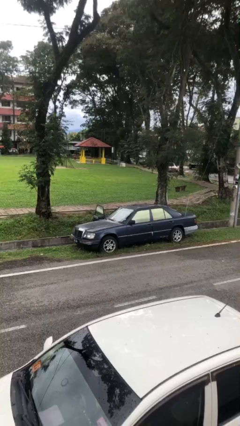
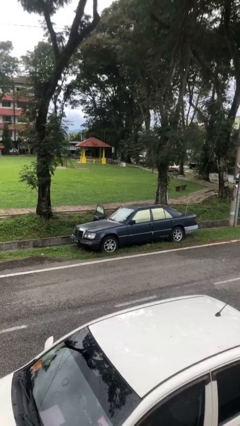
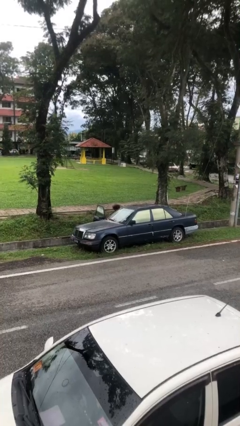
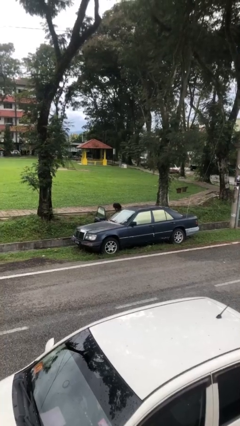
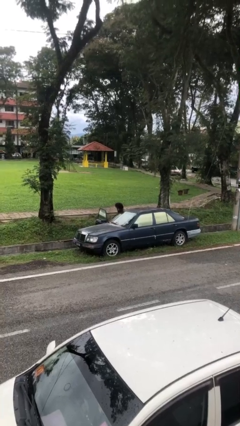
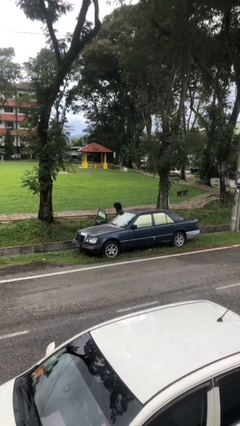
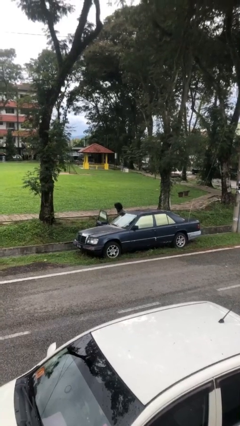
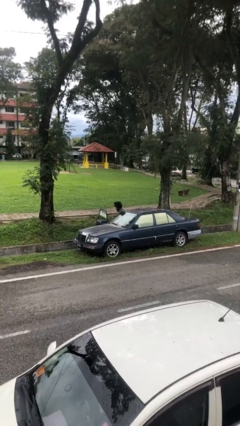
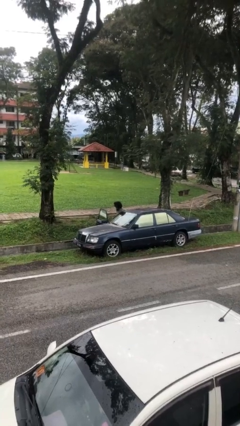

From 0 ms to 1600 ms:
person exits car

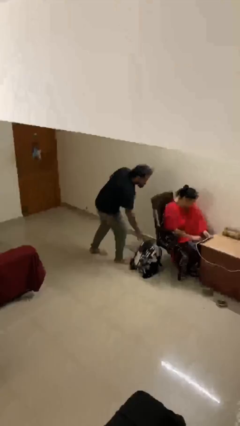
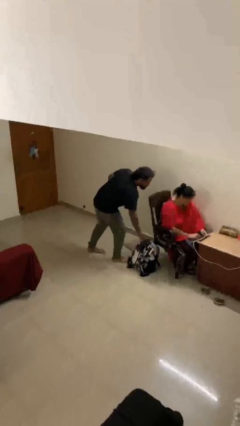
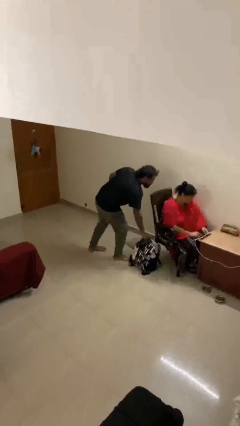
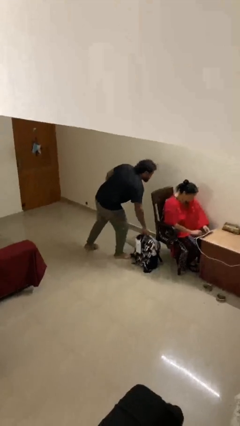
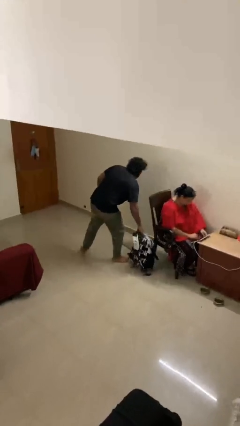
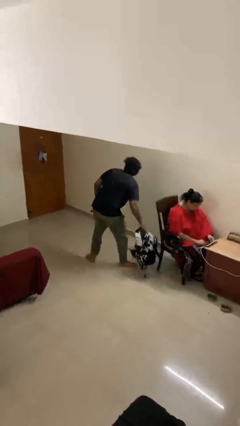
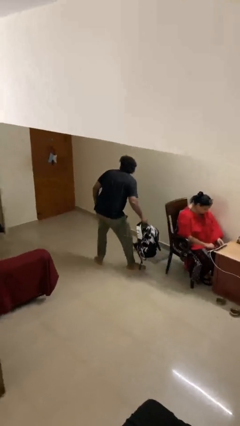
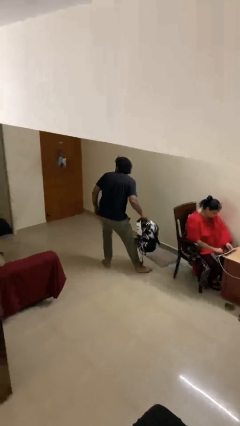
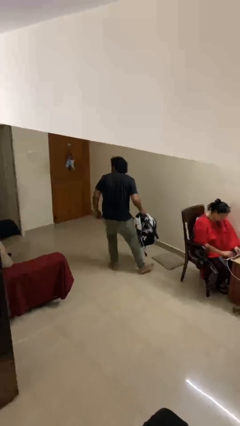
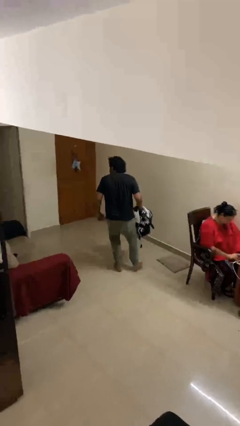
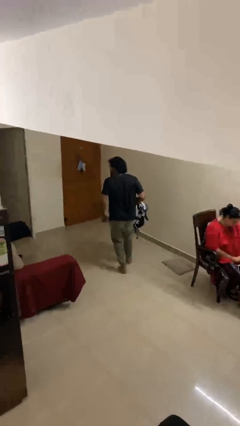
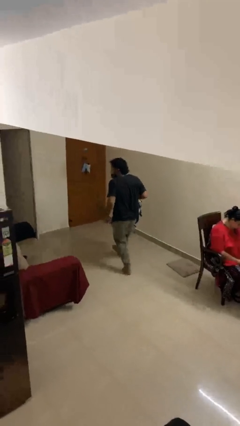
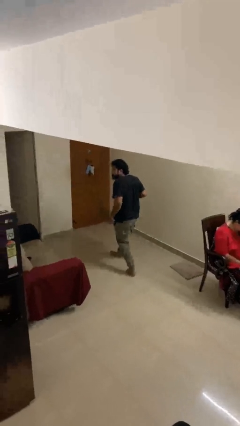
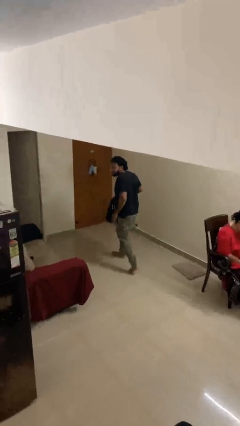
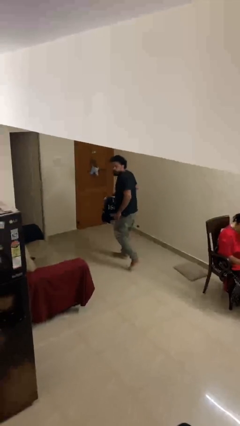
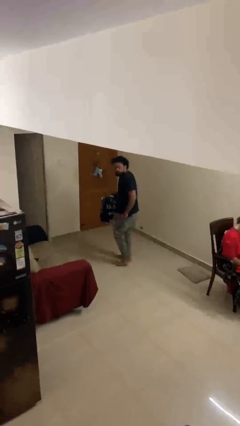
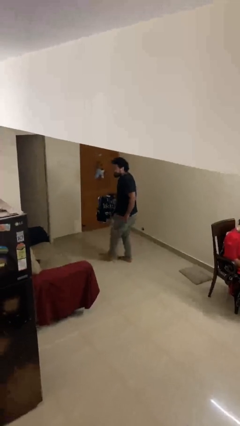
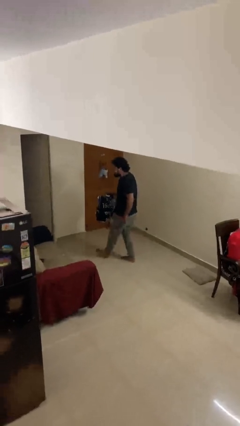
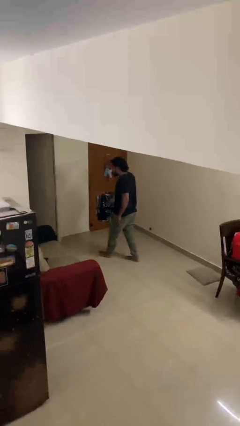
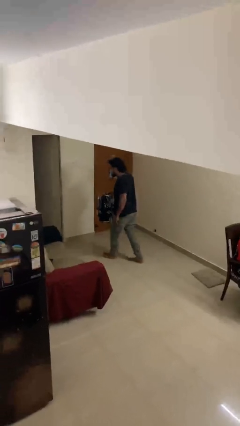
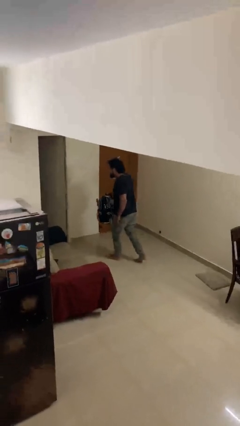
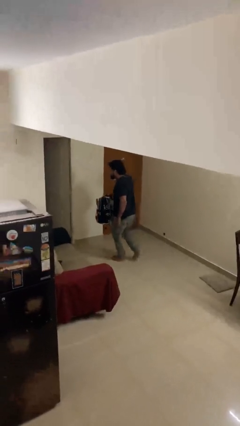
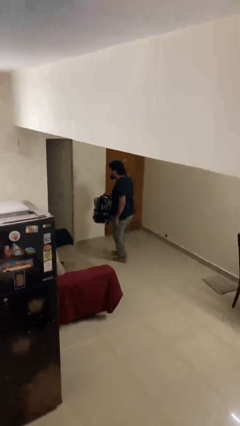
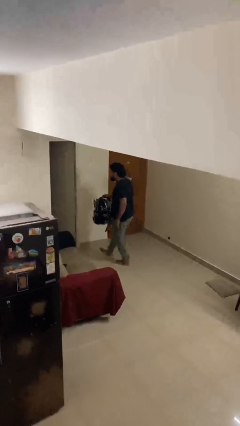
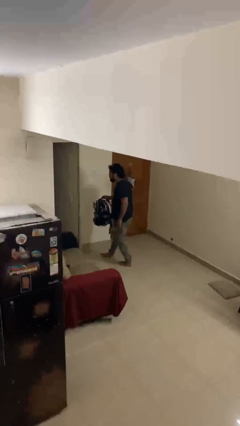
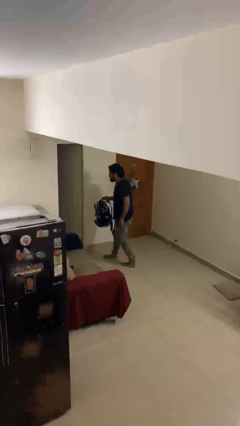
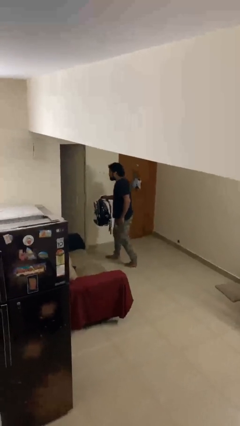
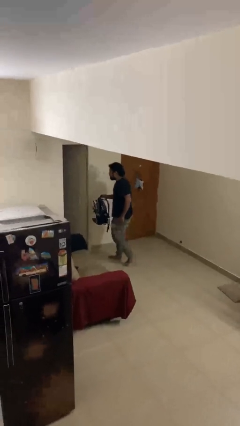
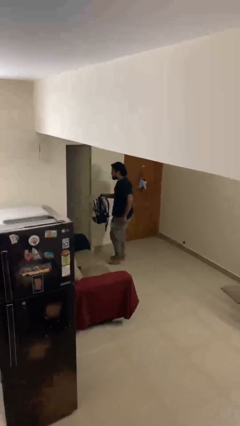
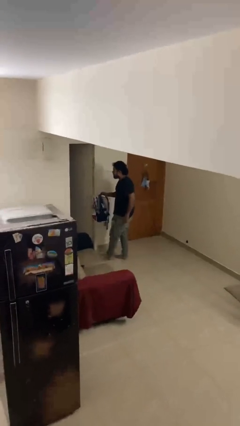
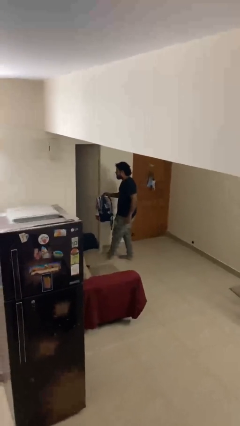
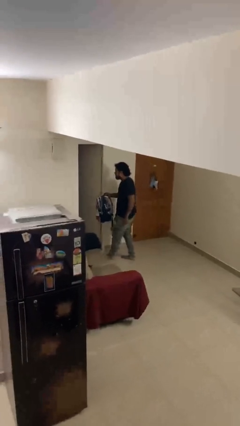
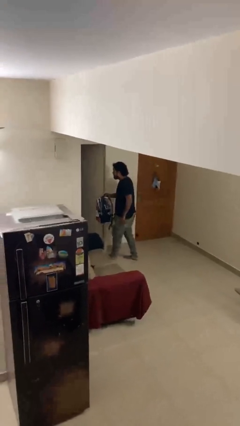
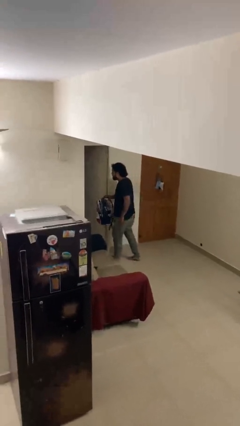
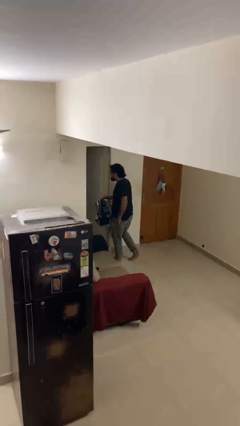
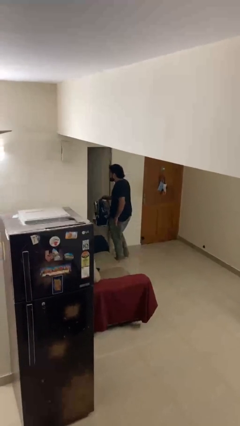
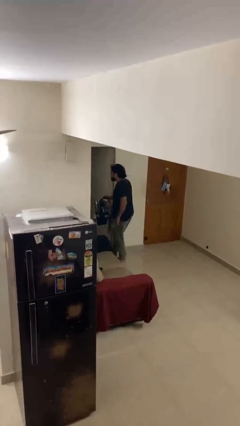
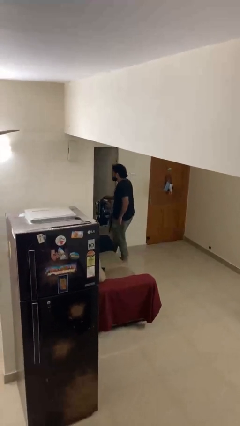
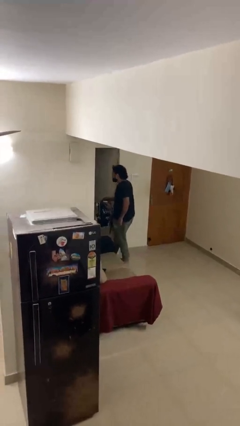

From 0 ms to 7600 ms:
person steals object from person

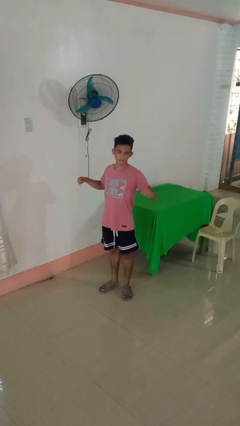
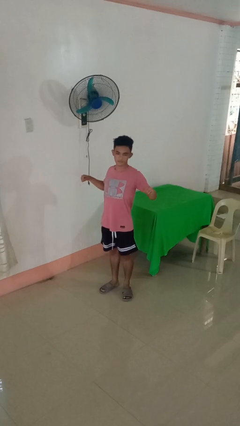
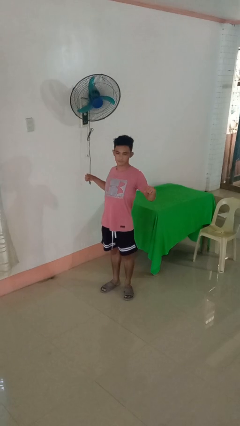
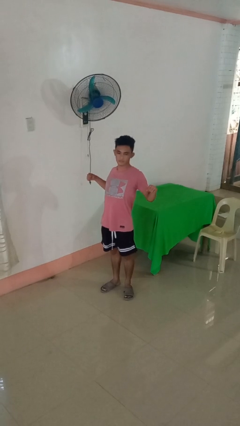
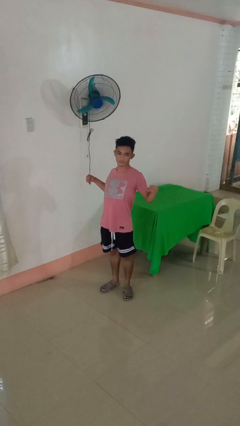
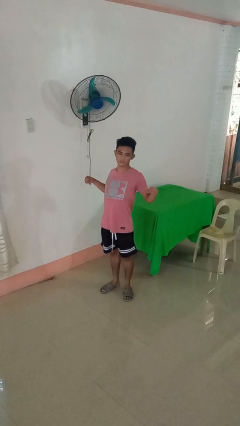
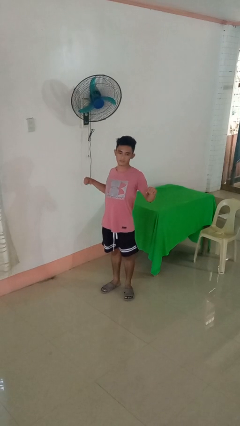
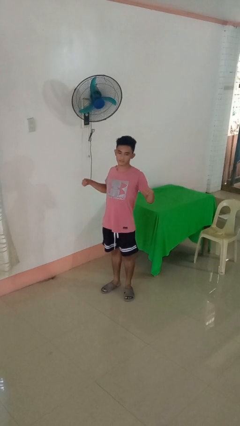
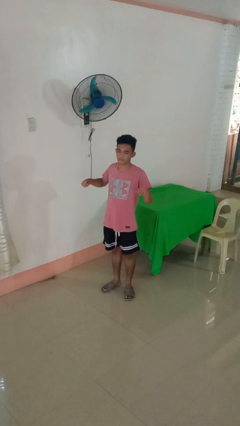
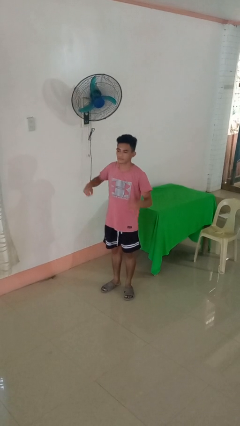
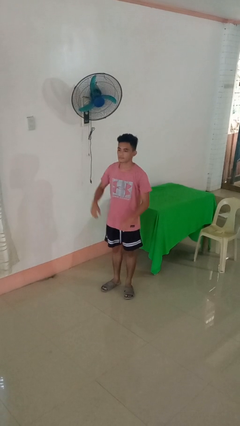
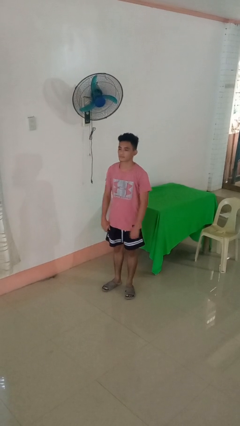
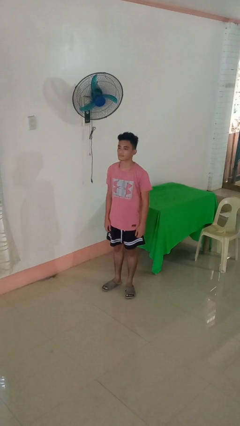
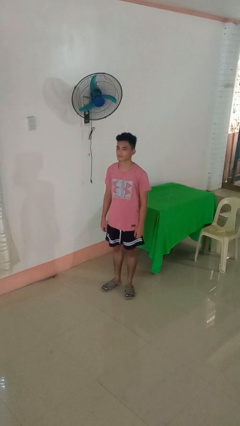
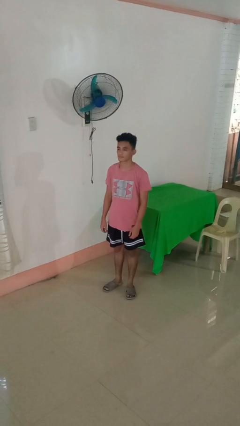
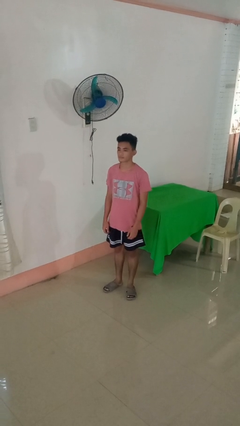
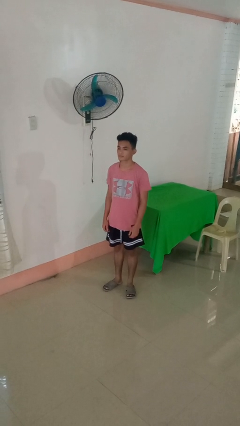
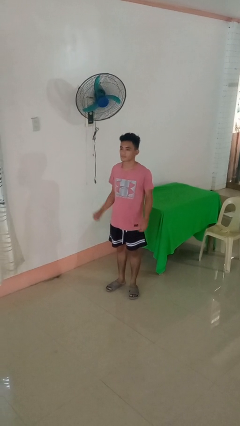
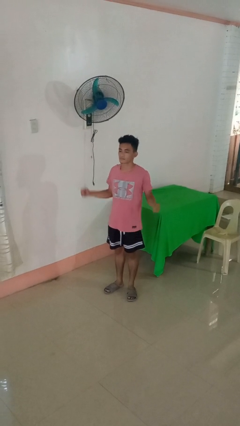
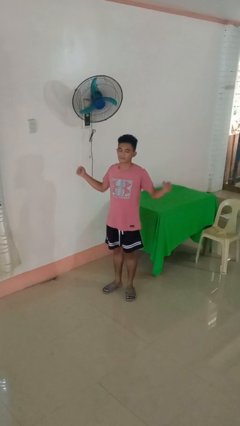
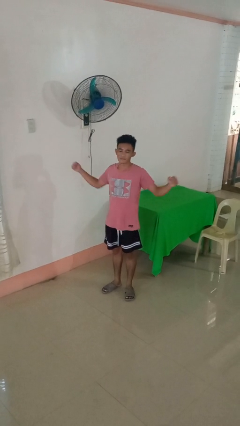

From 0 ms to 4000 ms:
person stretches back

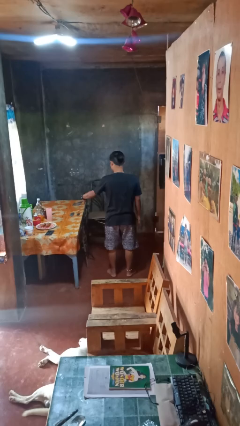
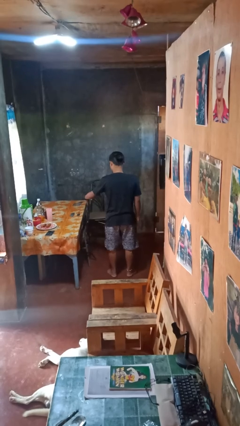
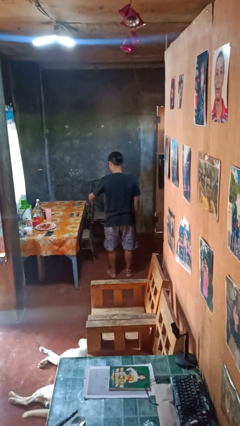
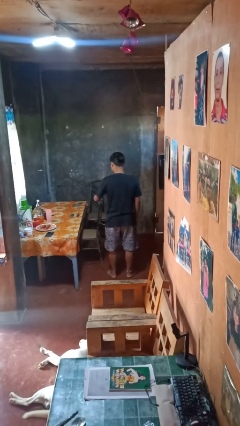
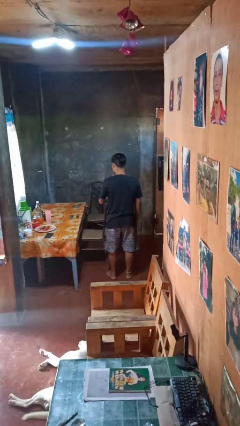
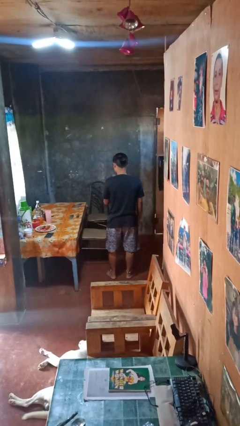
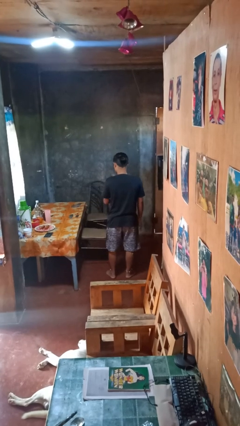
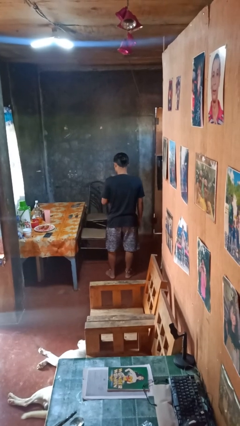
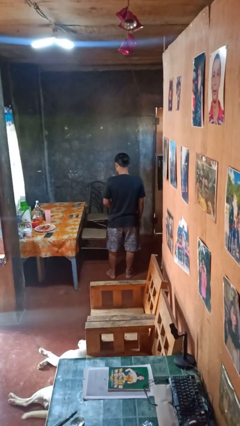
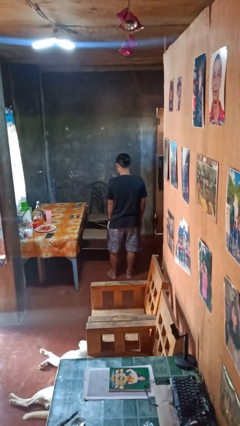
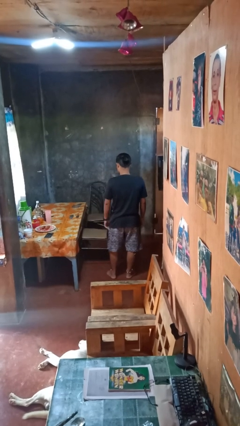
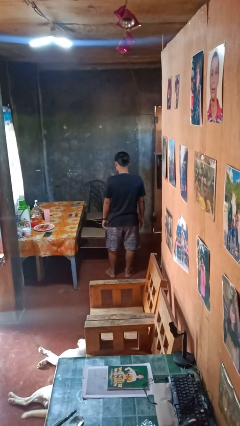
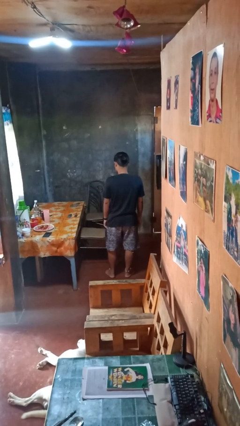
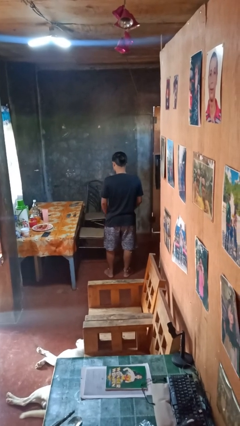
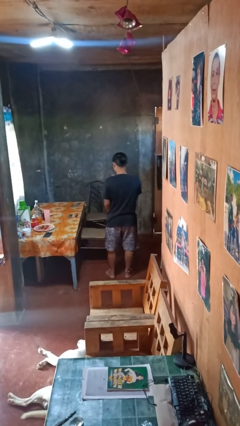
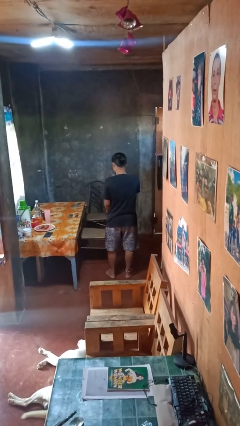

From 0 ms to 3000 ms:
person pulls out chair

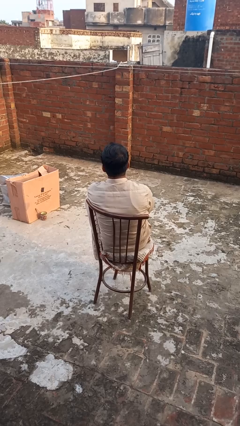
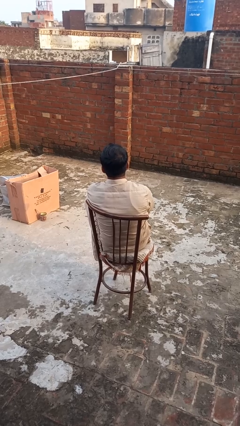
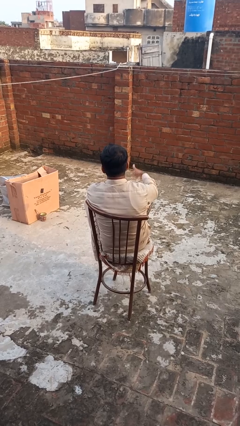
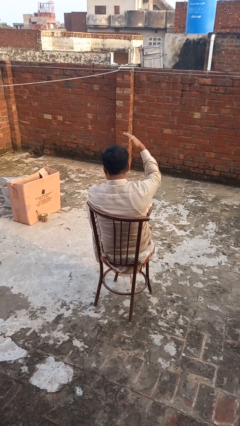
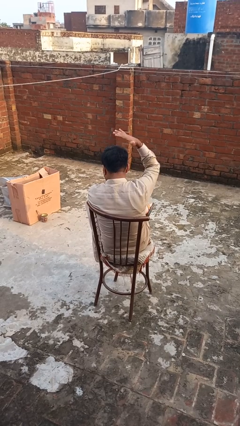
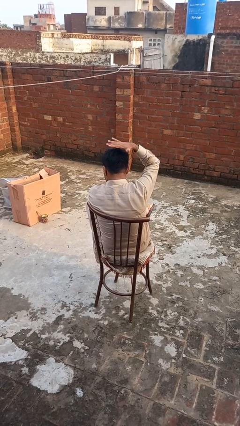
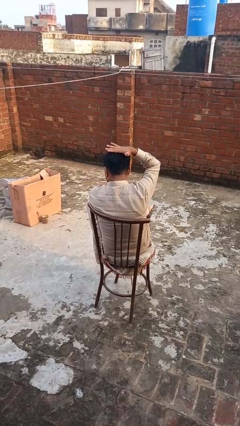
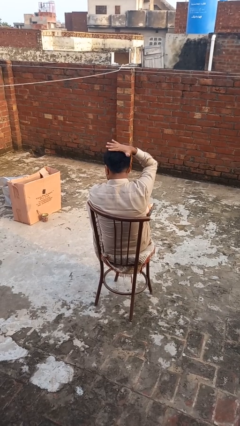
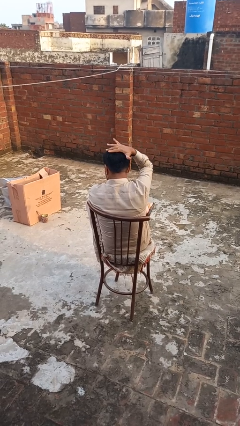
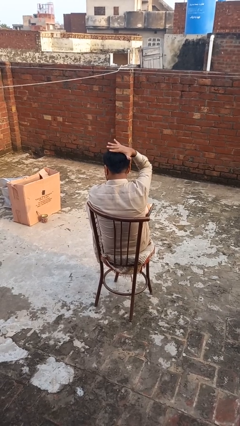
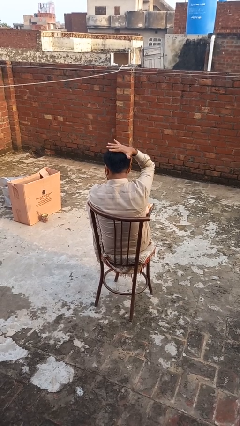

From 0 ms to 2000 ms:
person pats head
